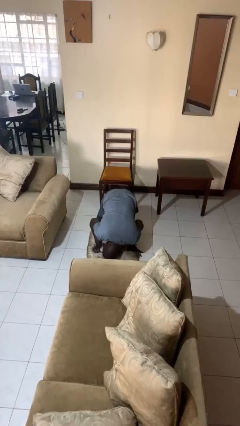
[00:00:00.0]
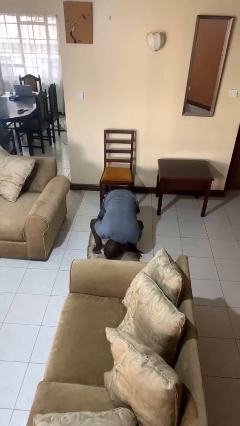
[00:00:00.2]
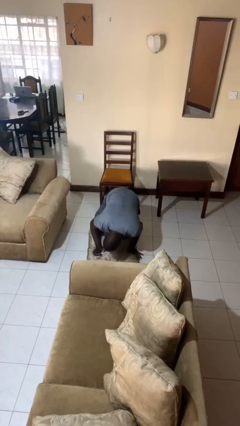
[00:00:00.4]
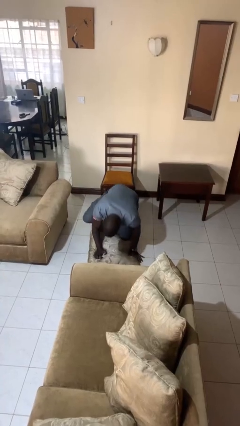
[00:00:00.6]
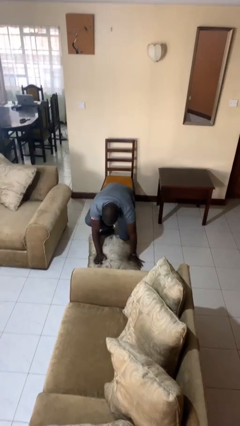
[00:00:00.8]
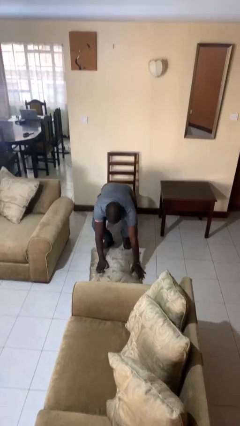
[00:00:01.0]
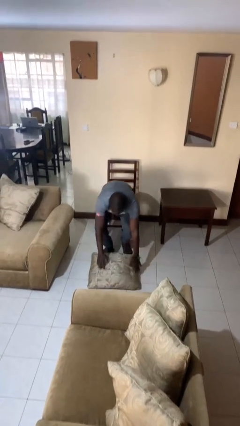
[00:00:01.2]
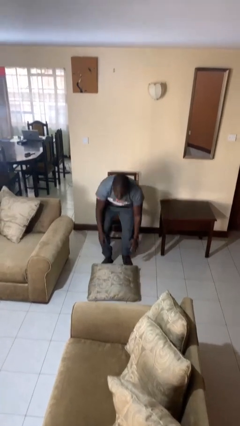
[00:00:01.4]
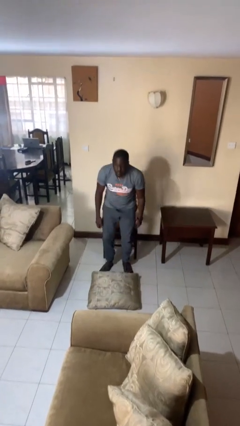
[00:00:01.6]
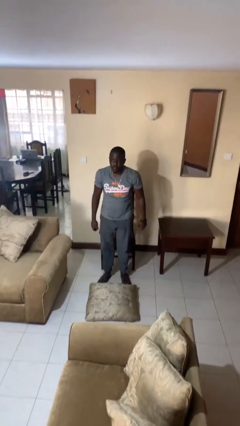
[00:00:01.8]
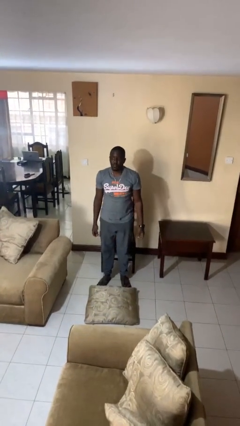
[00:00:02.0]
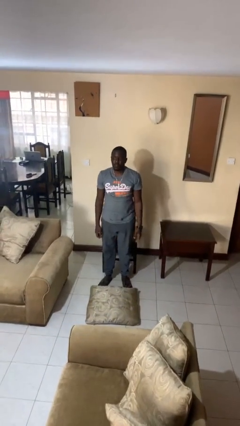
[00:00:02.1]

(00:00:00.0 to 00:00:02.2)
person stands up from floor

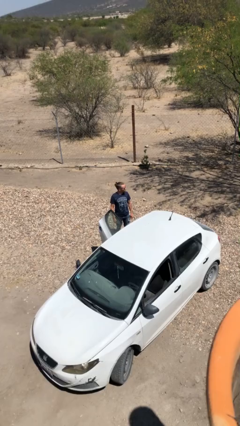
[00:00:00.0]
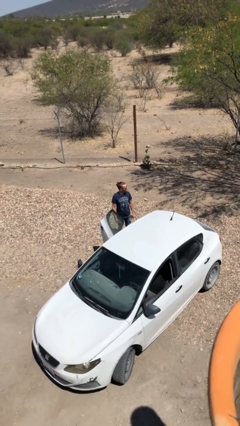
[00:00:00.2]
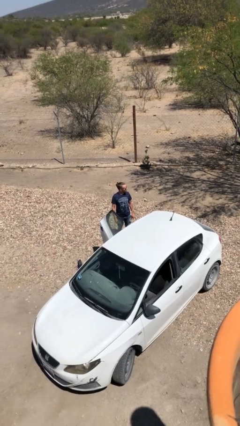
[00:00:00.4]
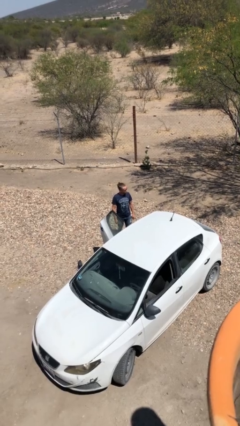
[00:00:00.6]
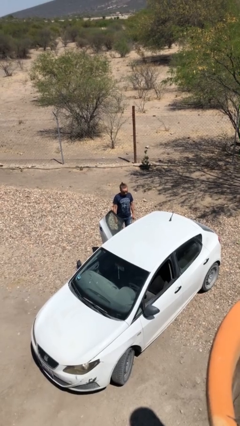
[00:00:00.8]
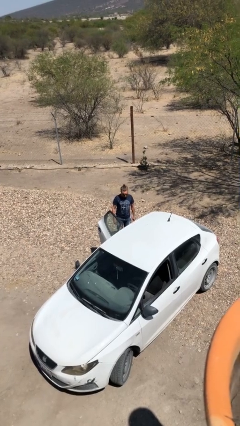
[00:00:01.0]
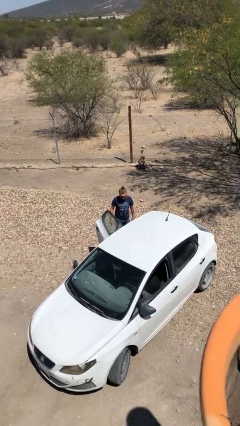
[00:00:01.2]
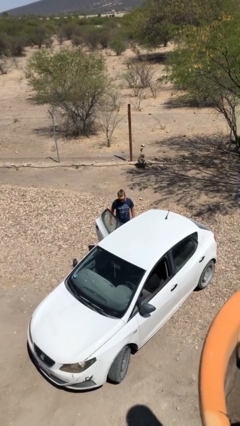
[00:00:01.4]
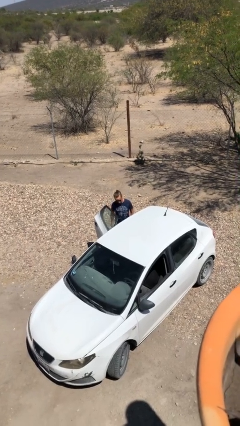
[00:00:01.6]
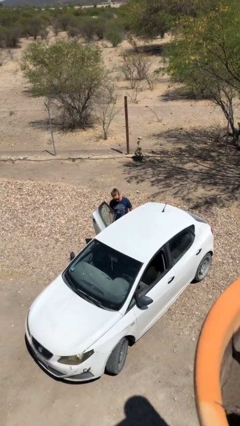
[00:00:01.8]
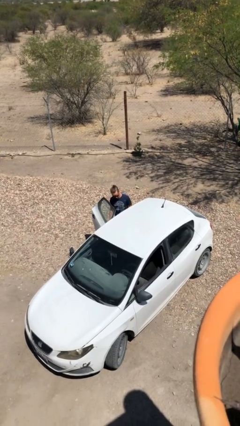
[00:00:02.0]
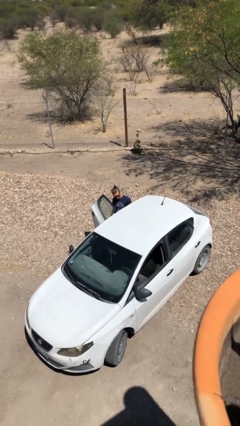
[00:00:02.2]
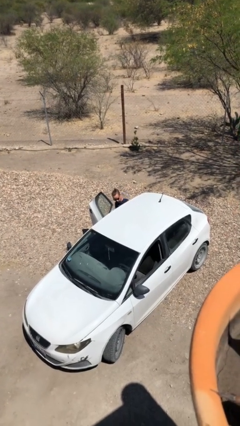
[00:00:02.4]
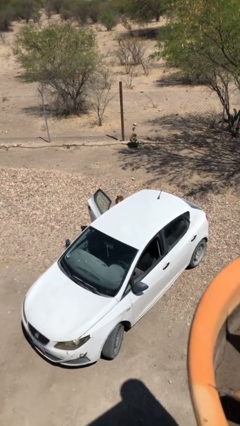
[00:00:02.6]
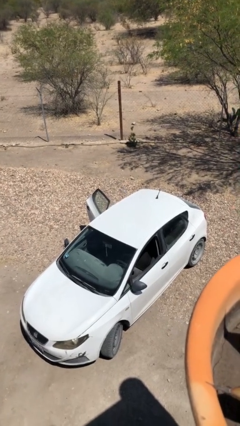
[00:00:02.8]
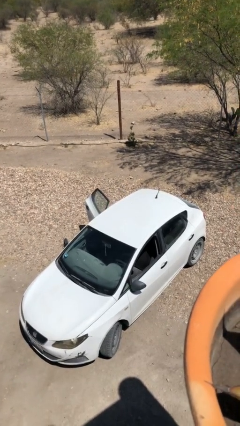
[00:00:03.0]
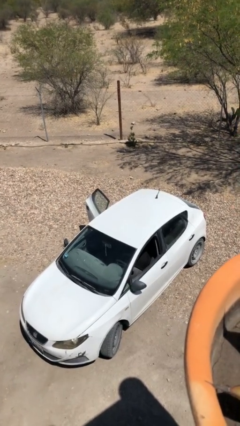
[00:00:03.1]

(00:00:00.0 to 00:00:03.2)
person enters car

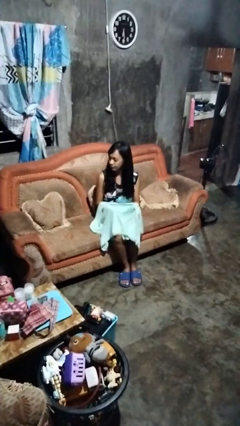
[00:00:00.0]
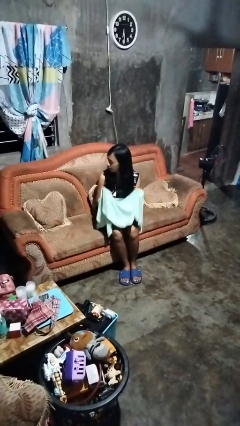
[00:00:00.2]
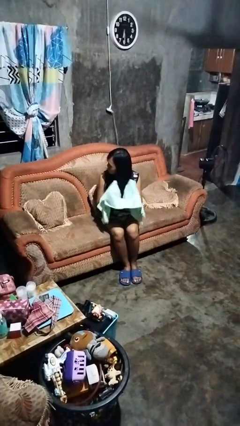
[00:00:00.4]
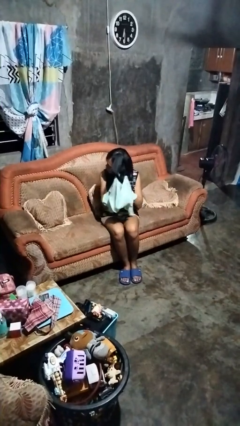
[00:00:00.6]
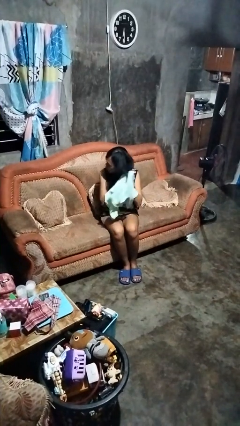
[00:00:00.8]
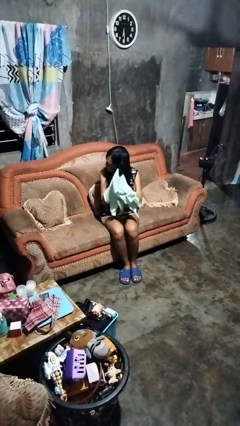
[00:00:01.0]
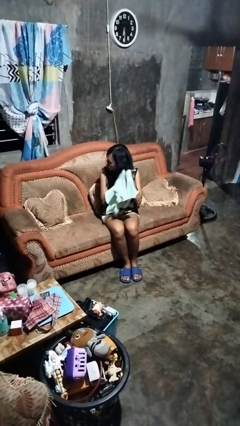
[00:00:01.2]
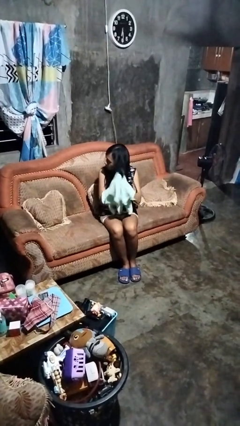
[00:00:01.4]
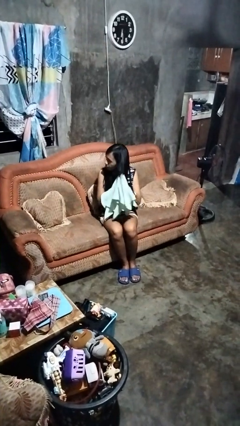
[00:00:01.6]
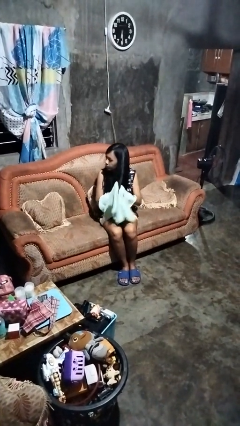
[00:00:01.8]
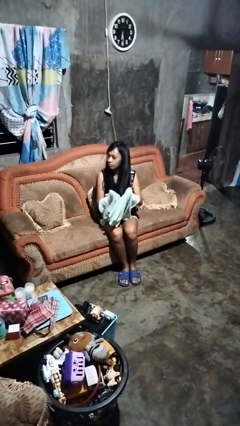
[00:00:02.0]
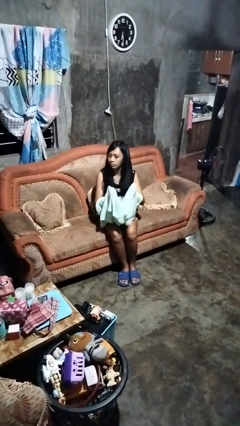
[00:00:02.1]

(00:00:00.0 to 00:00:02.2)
person dries hair with towel

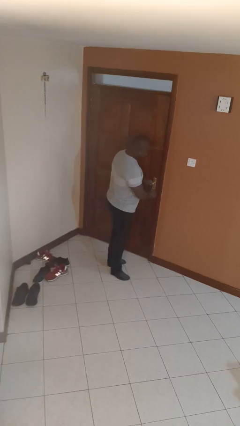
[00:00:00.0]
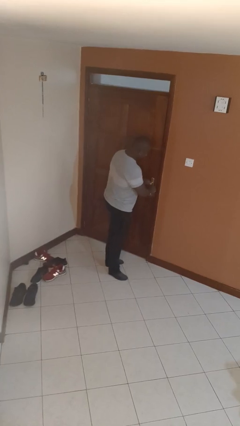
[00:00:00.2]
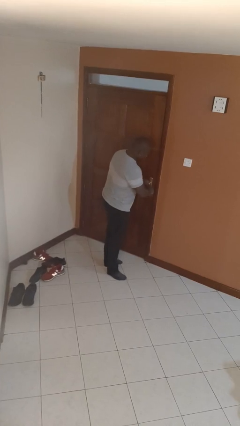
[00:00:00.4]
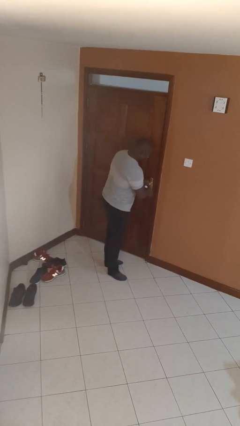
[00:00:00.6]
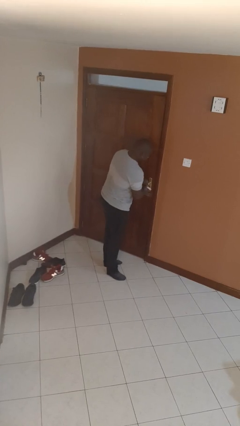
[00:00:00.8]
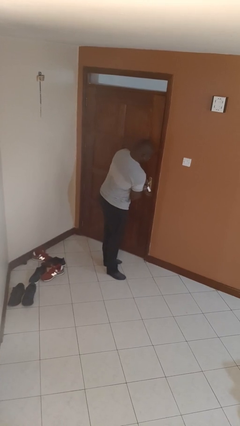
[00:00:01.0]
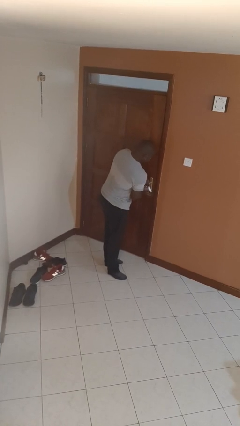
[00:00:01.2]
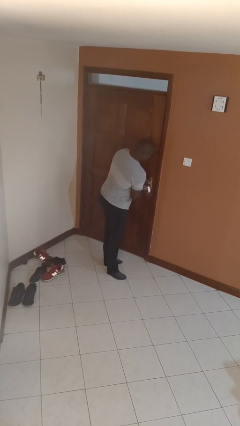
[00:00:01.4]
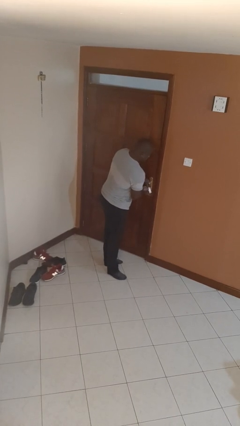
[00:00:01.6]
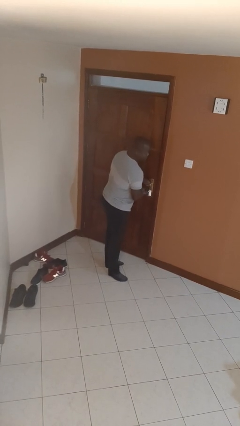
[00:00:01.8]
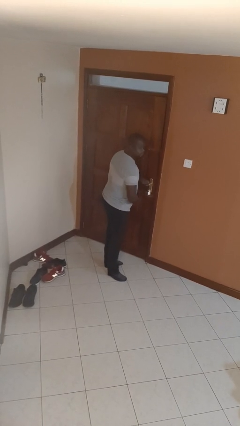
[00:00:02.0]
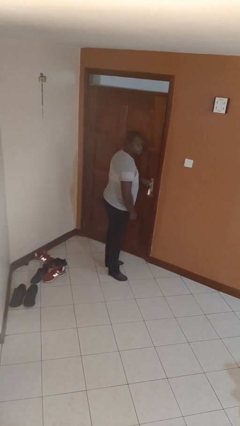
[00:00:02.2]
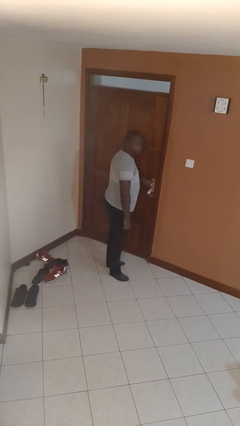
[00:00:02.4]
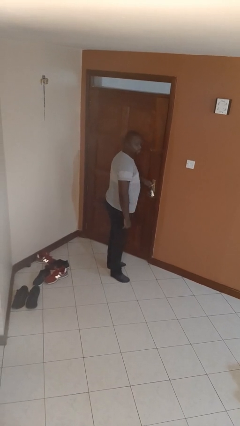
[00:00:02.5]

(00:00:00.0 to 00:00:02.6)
person locks door with keys

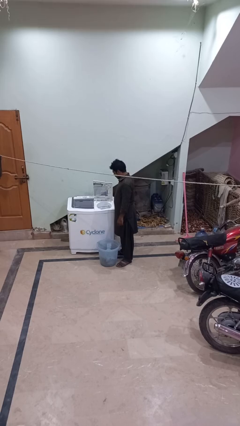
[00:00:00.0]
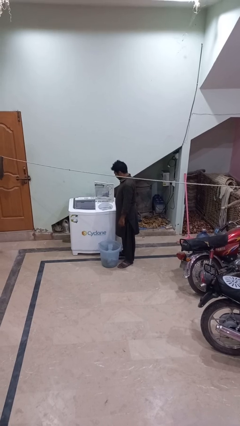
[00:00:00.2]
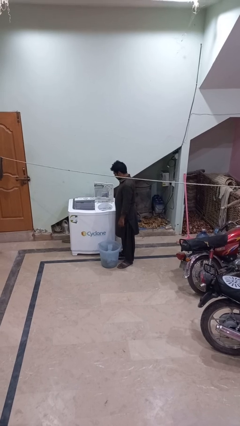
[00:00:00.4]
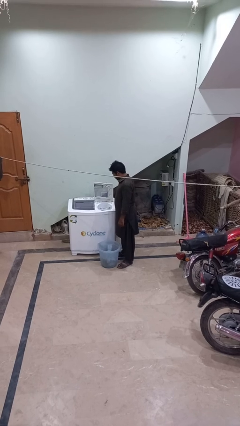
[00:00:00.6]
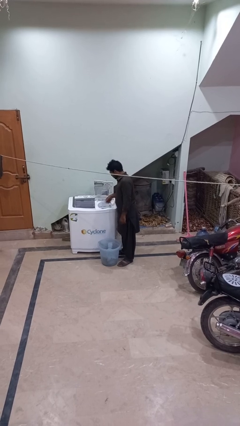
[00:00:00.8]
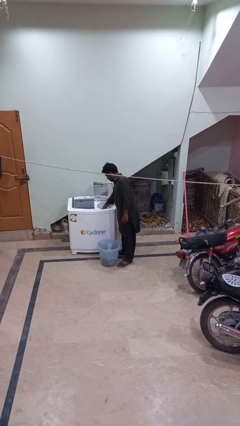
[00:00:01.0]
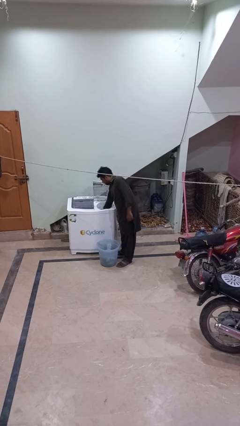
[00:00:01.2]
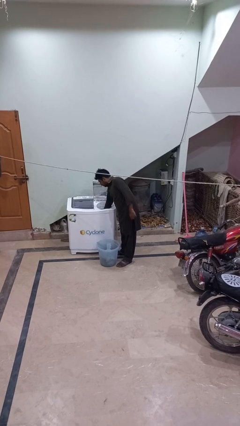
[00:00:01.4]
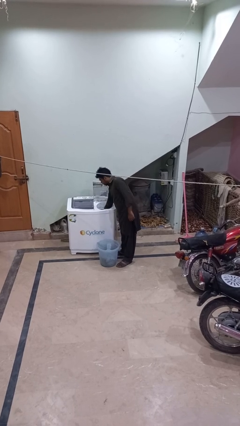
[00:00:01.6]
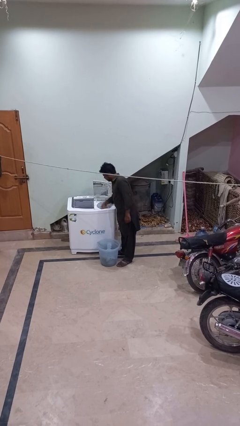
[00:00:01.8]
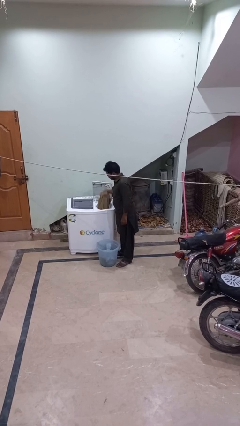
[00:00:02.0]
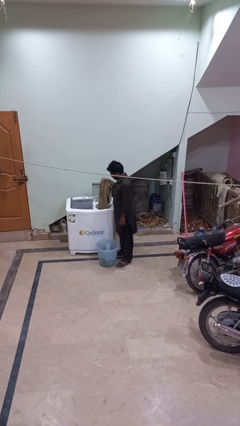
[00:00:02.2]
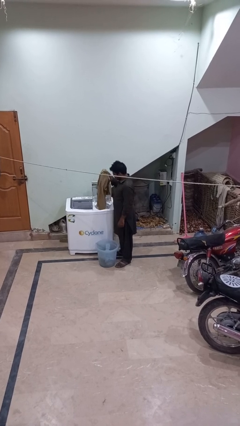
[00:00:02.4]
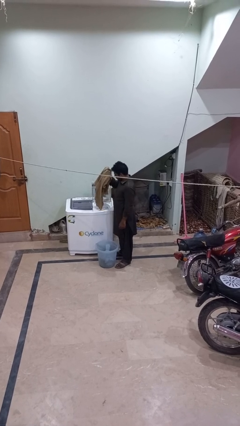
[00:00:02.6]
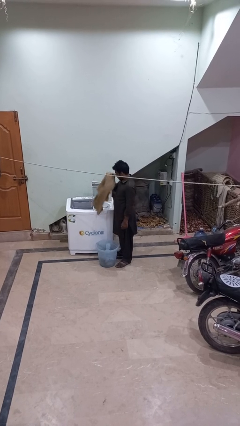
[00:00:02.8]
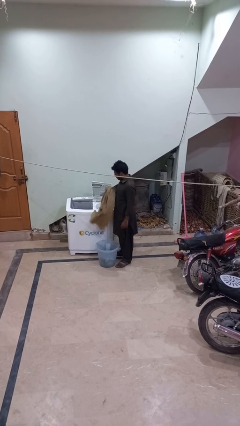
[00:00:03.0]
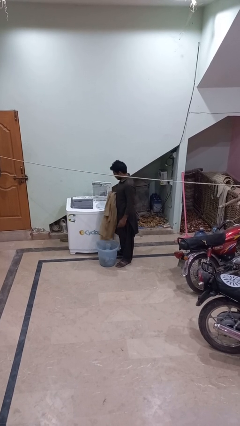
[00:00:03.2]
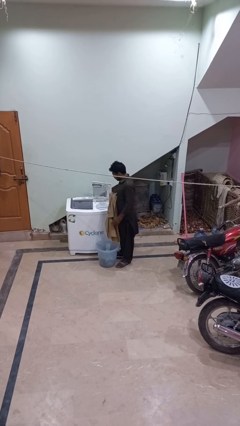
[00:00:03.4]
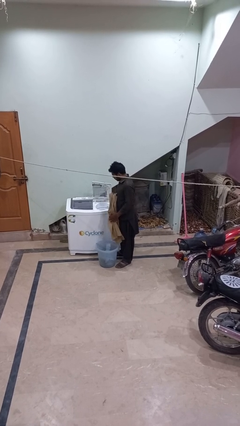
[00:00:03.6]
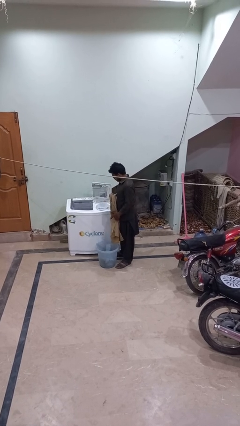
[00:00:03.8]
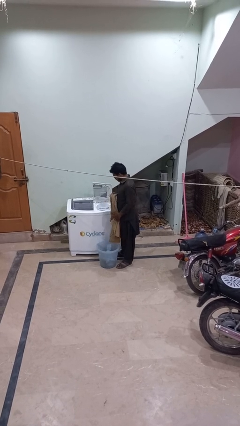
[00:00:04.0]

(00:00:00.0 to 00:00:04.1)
person unloads dryer

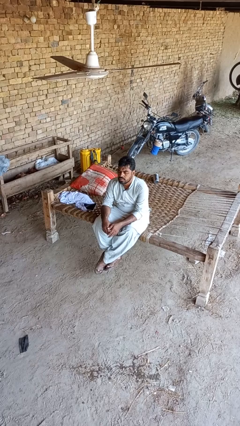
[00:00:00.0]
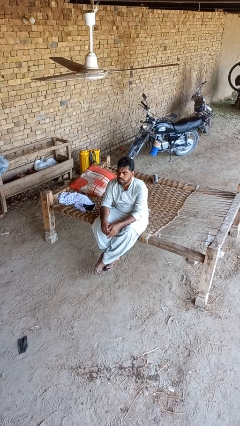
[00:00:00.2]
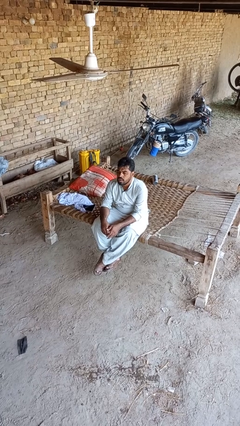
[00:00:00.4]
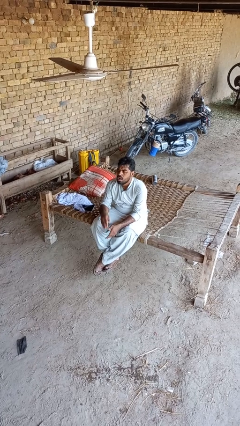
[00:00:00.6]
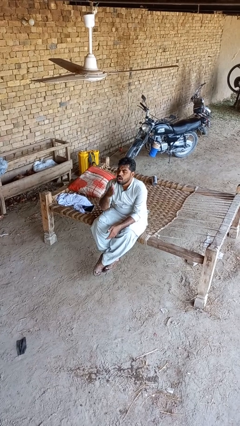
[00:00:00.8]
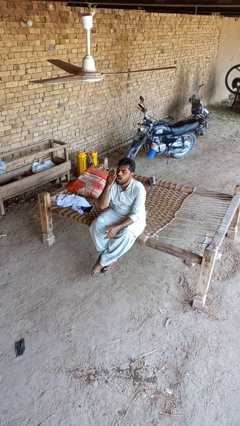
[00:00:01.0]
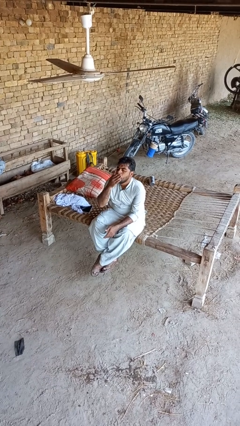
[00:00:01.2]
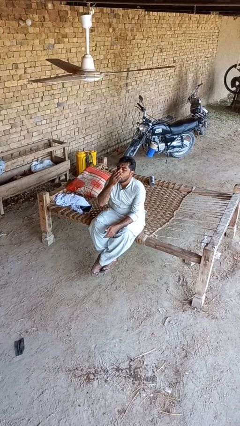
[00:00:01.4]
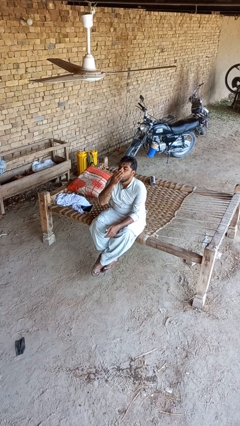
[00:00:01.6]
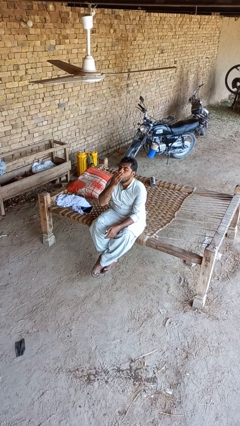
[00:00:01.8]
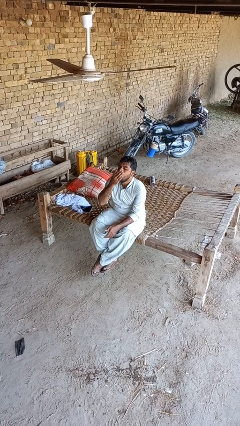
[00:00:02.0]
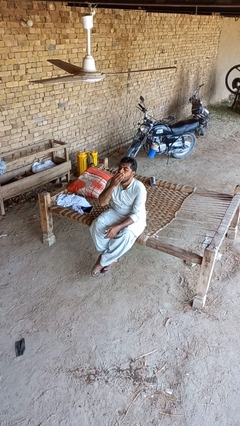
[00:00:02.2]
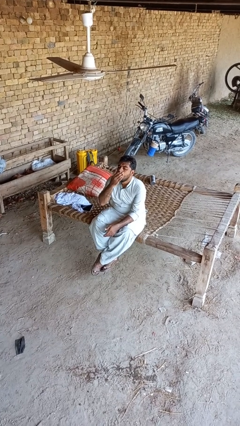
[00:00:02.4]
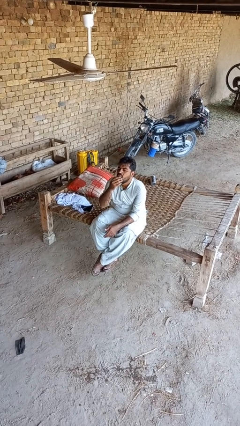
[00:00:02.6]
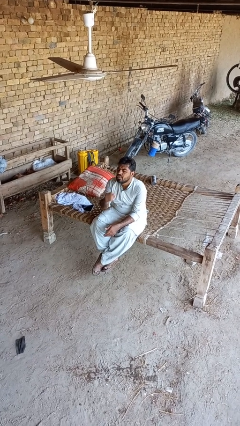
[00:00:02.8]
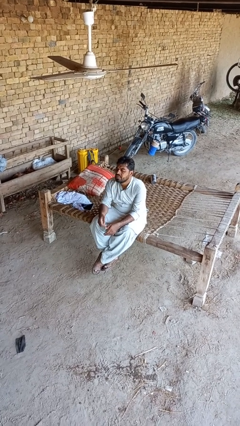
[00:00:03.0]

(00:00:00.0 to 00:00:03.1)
person yawns
